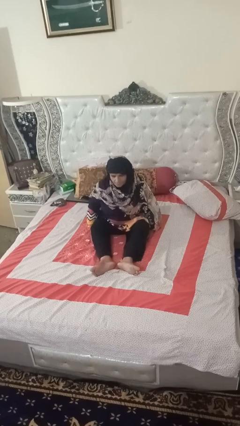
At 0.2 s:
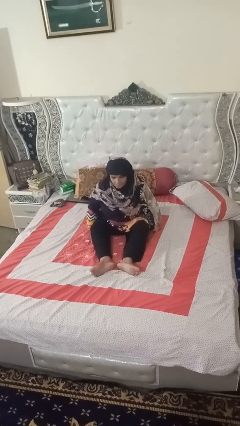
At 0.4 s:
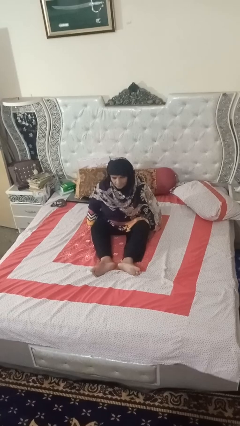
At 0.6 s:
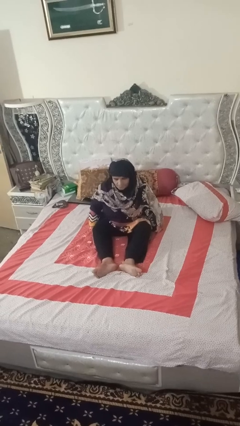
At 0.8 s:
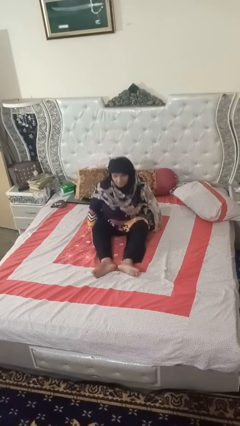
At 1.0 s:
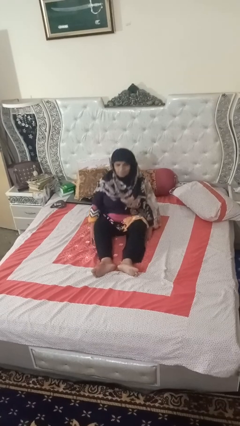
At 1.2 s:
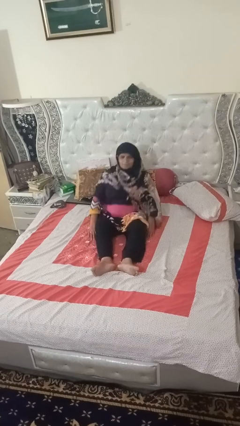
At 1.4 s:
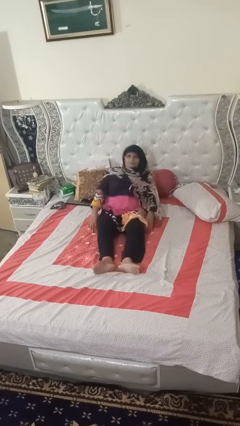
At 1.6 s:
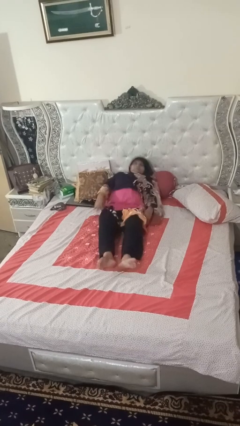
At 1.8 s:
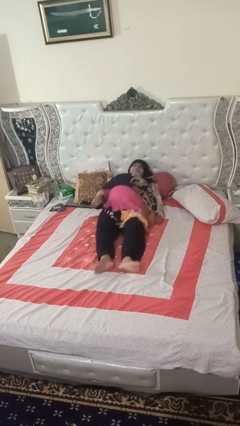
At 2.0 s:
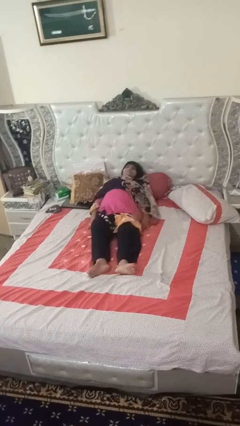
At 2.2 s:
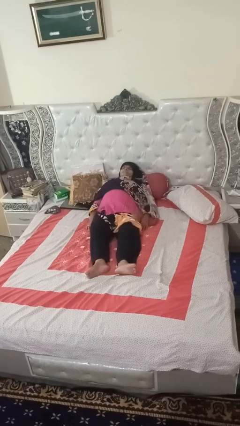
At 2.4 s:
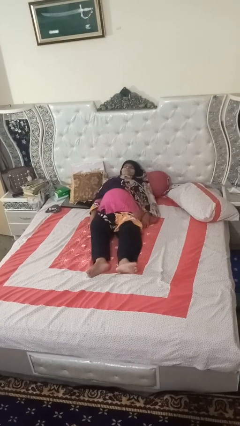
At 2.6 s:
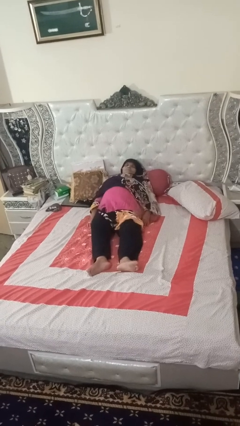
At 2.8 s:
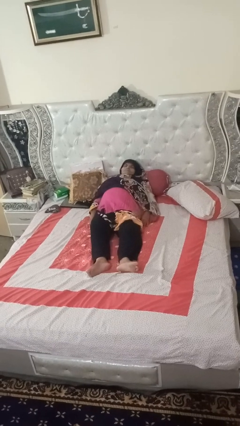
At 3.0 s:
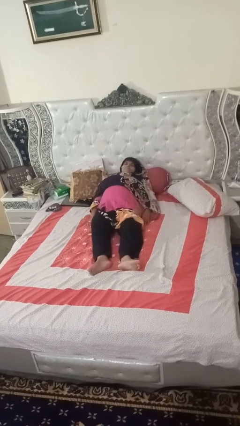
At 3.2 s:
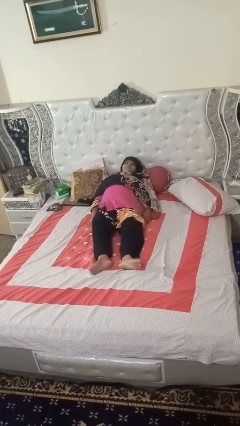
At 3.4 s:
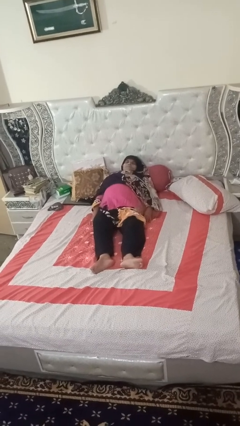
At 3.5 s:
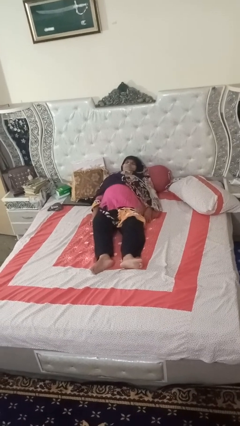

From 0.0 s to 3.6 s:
person lies down on bed

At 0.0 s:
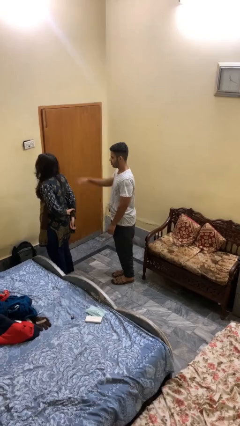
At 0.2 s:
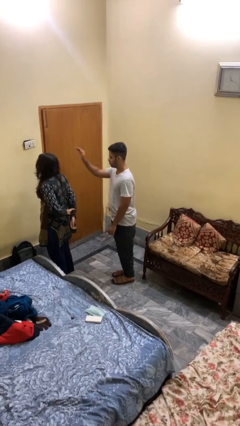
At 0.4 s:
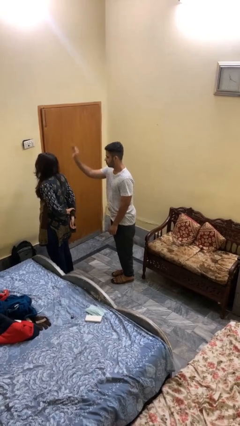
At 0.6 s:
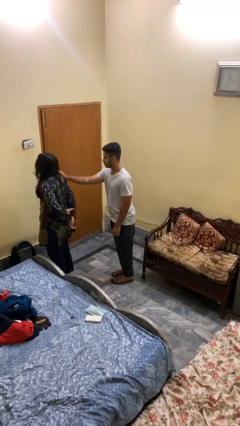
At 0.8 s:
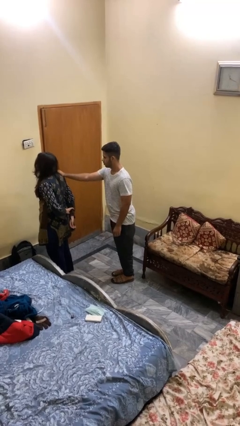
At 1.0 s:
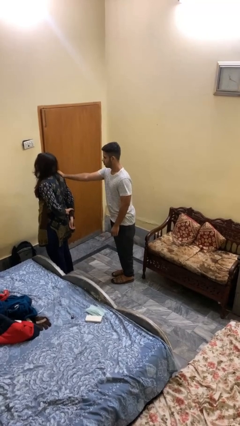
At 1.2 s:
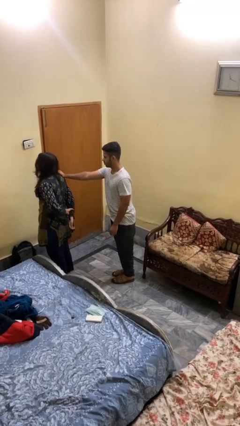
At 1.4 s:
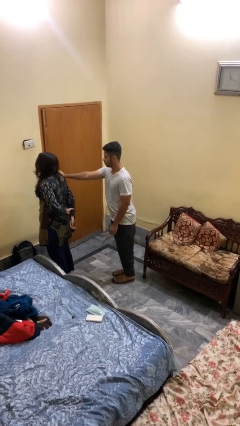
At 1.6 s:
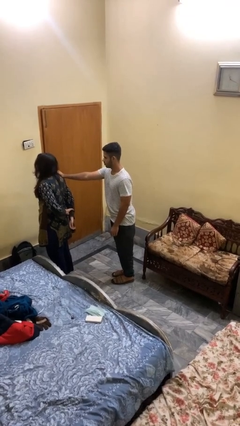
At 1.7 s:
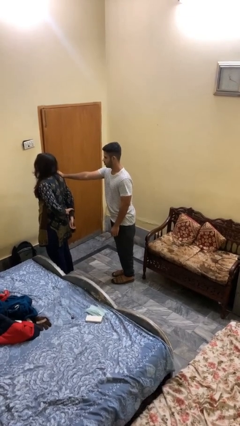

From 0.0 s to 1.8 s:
person grabs person by shoulder

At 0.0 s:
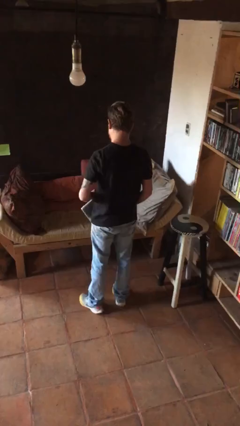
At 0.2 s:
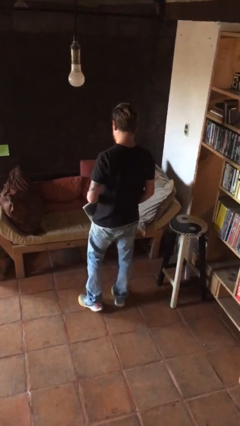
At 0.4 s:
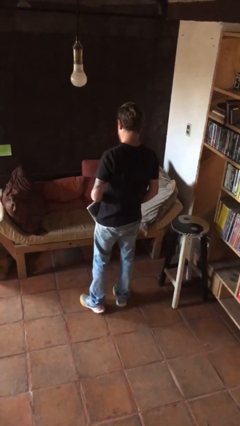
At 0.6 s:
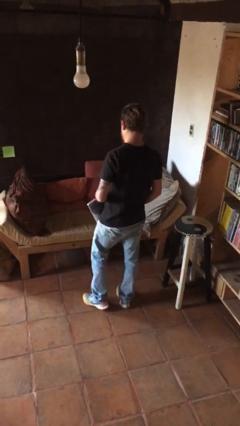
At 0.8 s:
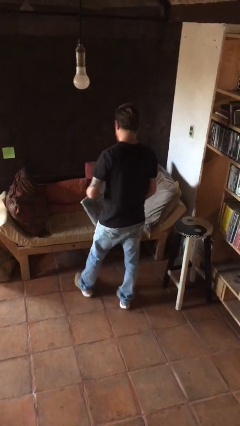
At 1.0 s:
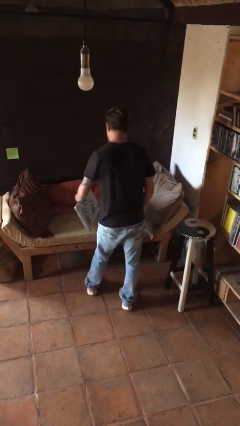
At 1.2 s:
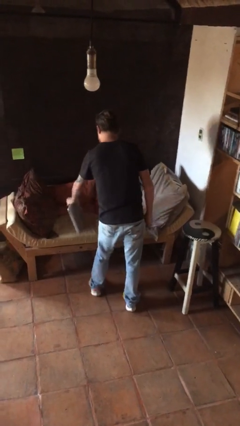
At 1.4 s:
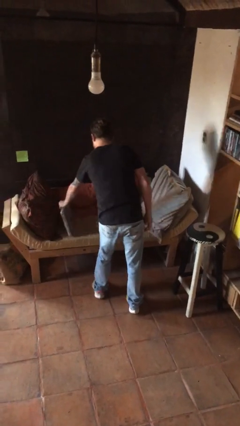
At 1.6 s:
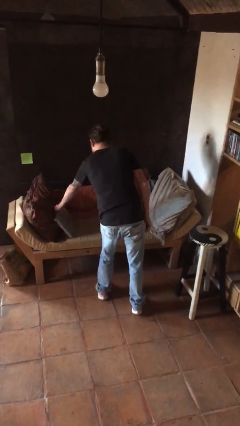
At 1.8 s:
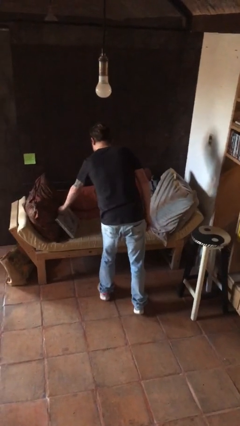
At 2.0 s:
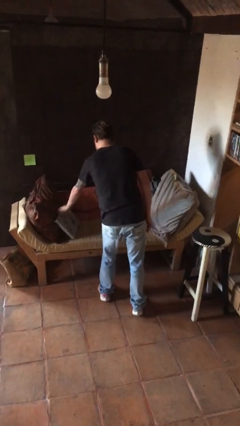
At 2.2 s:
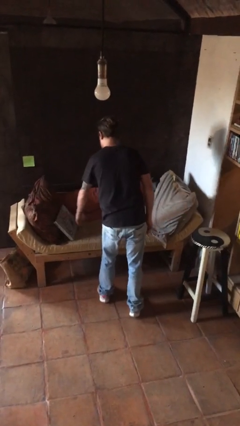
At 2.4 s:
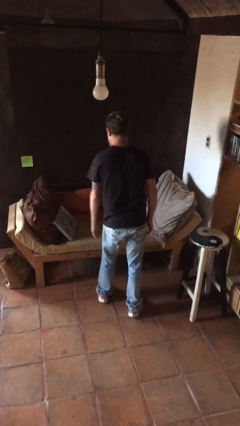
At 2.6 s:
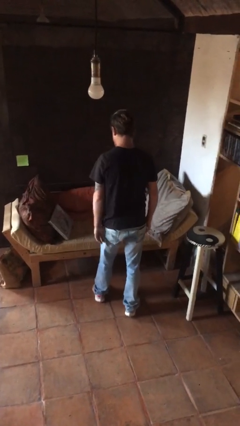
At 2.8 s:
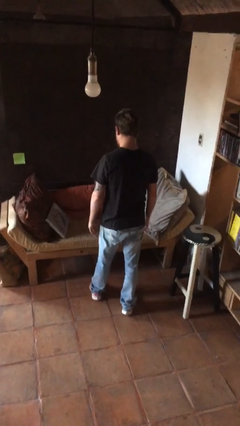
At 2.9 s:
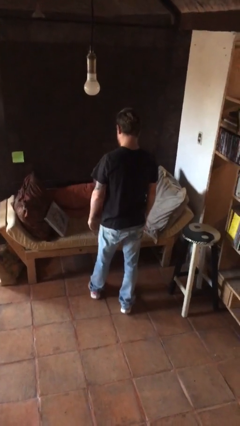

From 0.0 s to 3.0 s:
person puts down object on couch

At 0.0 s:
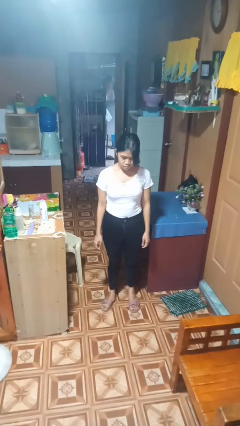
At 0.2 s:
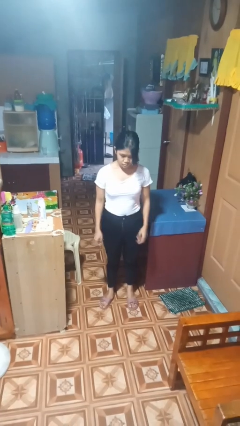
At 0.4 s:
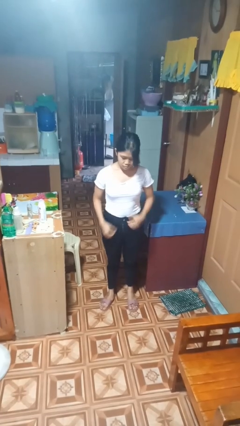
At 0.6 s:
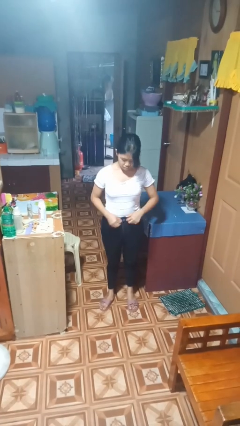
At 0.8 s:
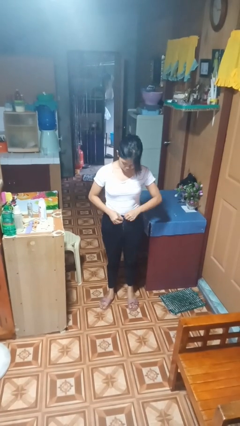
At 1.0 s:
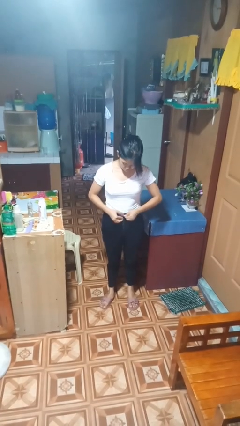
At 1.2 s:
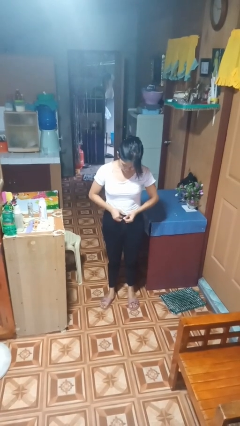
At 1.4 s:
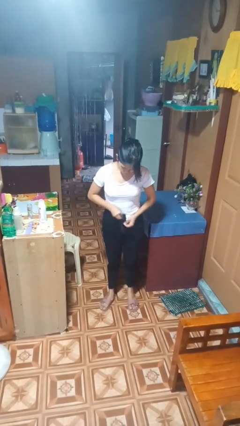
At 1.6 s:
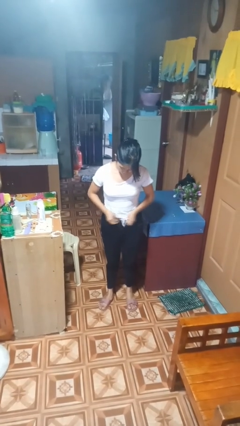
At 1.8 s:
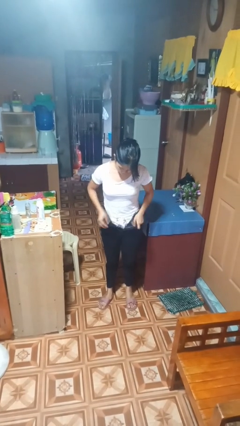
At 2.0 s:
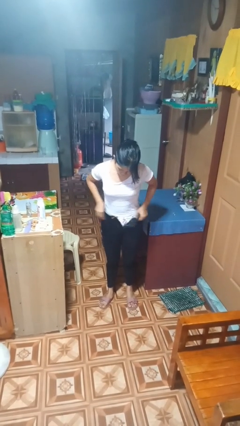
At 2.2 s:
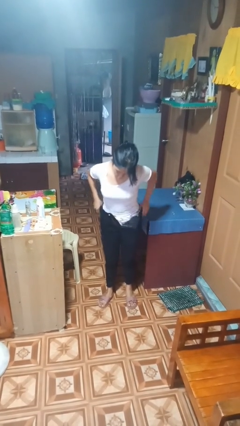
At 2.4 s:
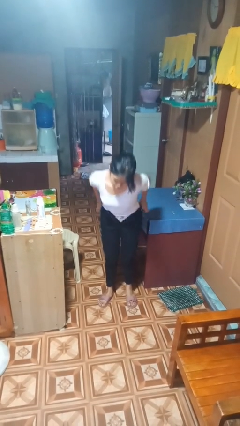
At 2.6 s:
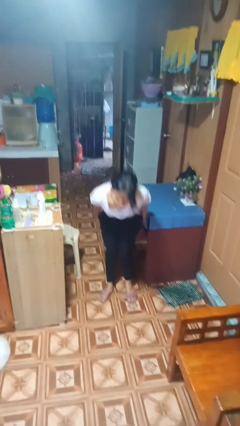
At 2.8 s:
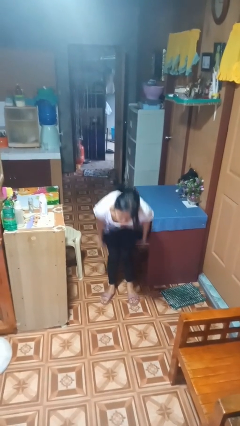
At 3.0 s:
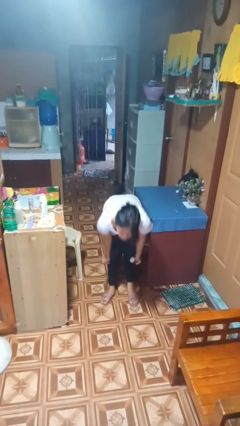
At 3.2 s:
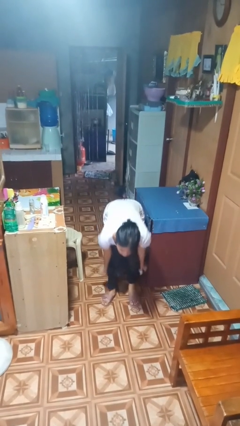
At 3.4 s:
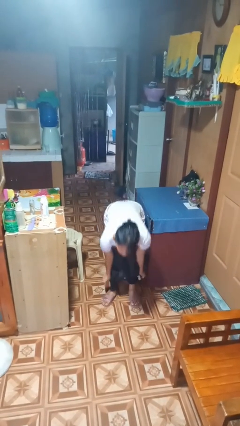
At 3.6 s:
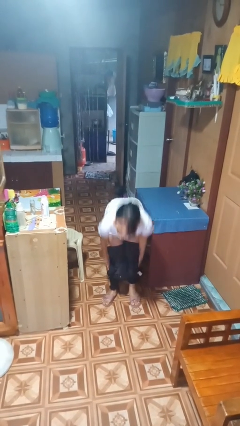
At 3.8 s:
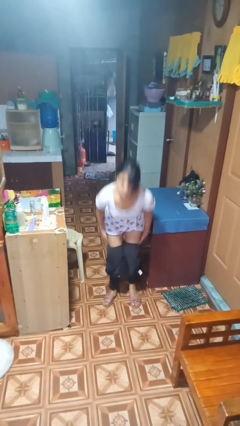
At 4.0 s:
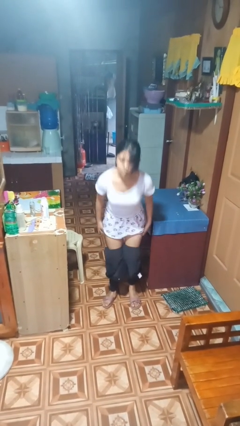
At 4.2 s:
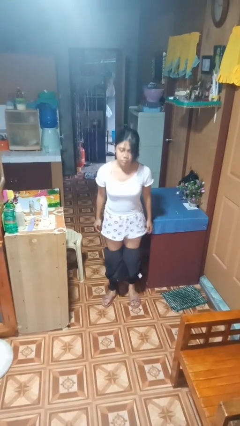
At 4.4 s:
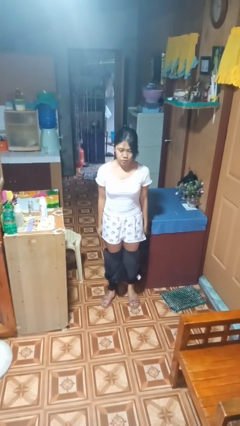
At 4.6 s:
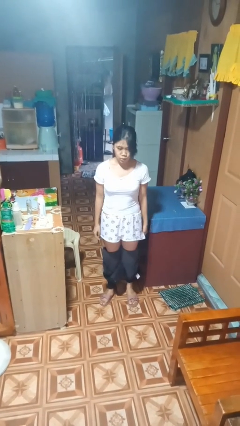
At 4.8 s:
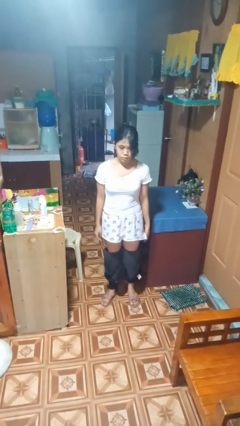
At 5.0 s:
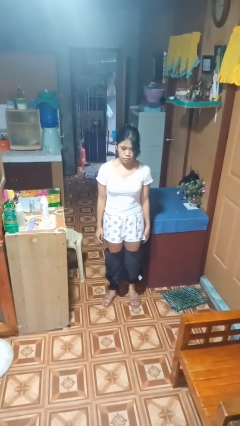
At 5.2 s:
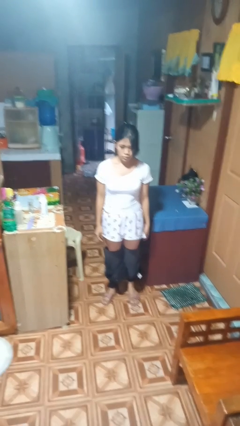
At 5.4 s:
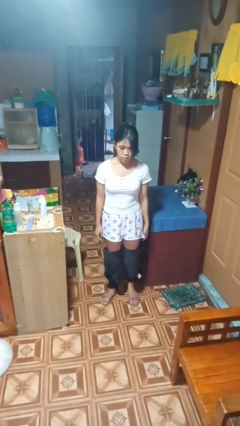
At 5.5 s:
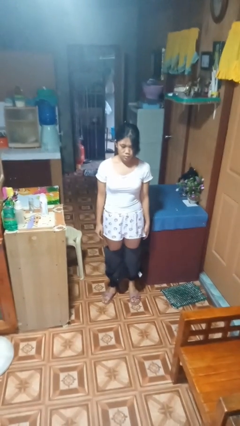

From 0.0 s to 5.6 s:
person takes off pants

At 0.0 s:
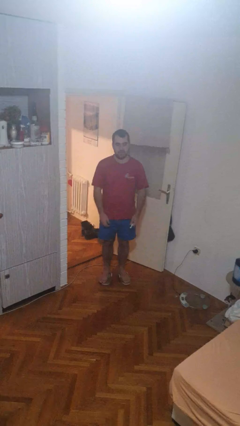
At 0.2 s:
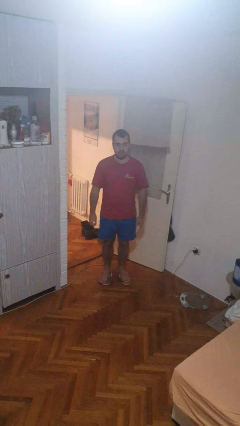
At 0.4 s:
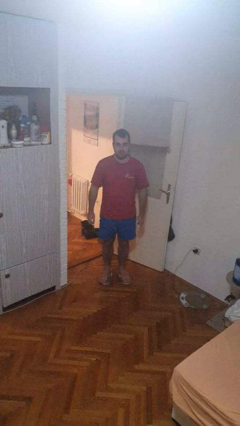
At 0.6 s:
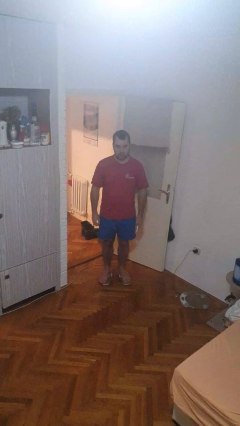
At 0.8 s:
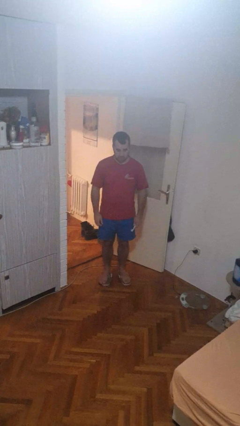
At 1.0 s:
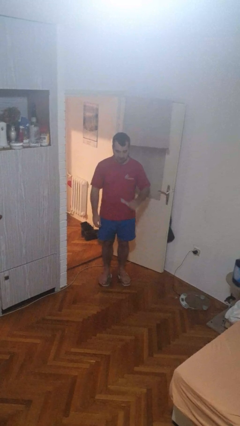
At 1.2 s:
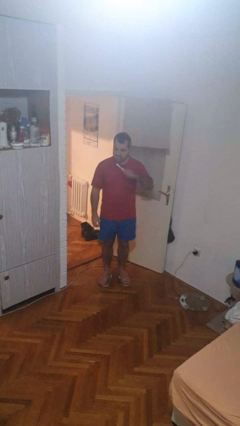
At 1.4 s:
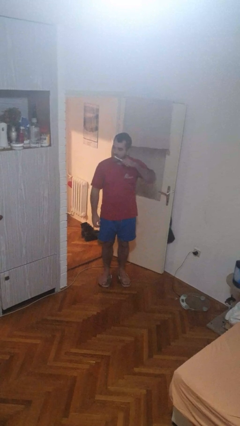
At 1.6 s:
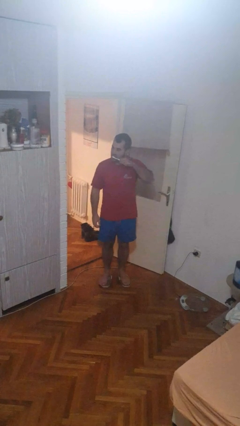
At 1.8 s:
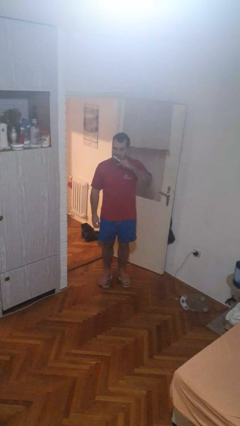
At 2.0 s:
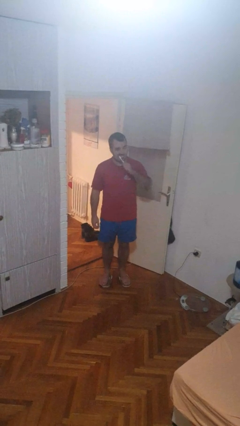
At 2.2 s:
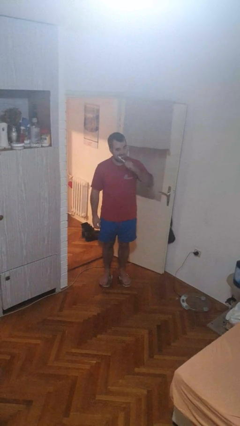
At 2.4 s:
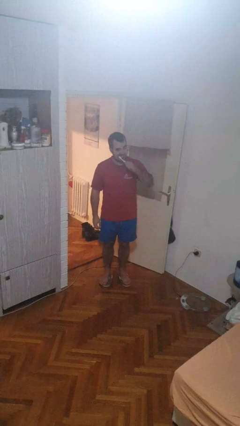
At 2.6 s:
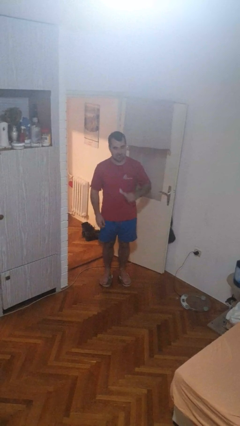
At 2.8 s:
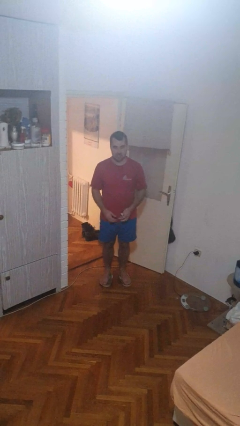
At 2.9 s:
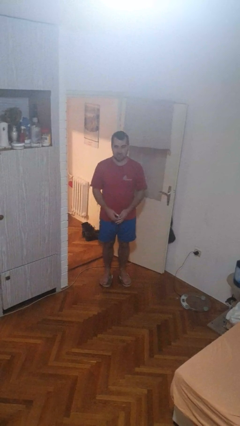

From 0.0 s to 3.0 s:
person brushes teeth

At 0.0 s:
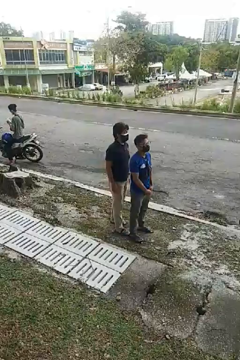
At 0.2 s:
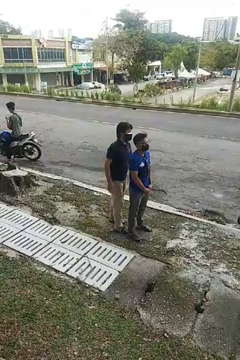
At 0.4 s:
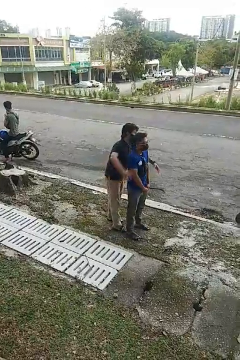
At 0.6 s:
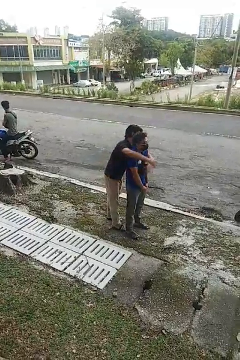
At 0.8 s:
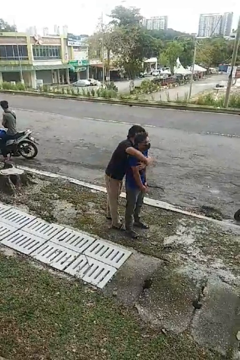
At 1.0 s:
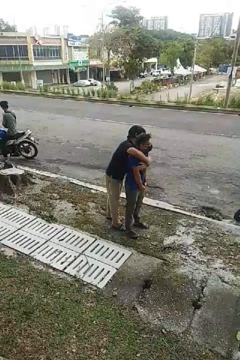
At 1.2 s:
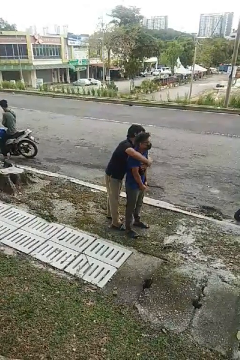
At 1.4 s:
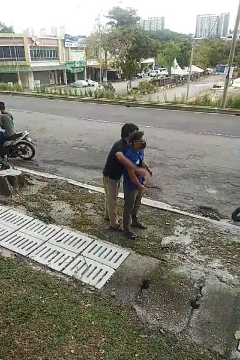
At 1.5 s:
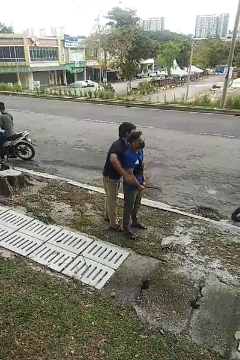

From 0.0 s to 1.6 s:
person hugs person from behind
